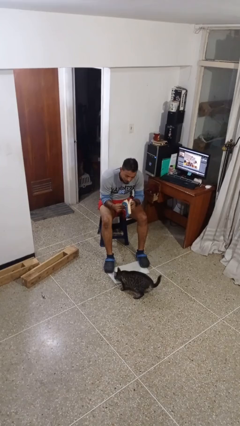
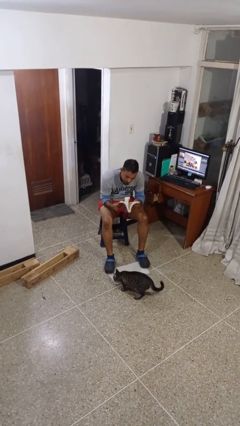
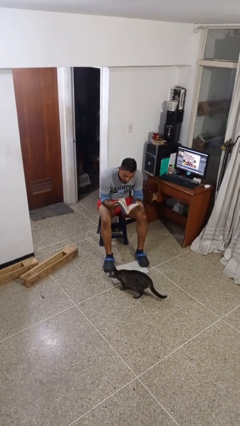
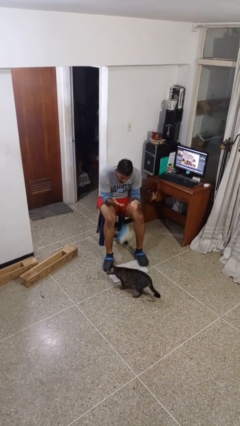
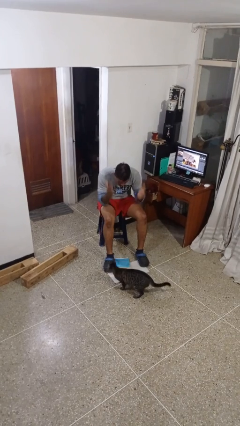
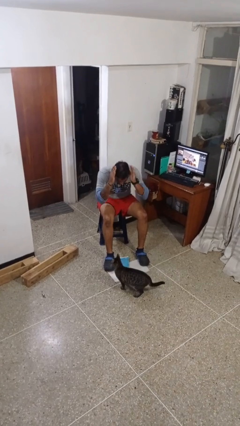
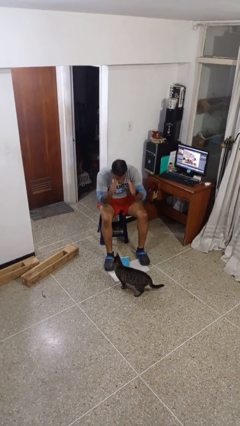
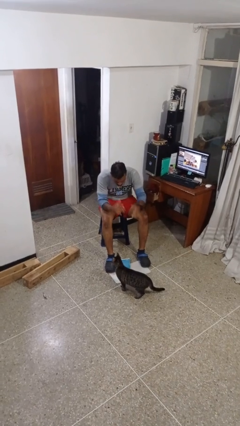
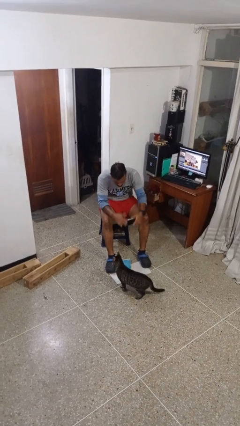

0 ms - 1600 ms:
person drops object

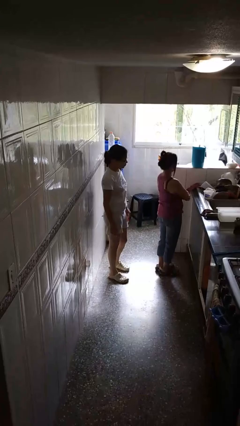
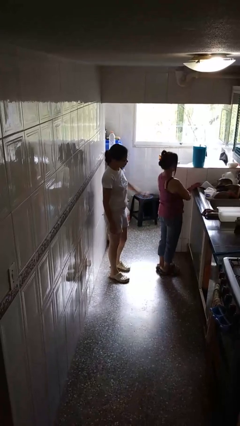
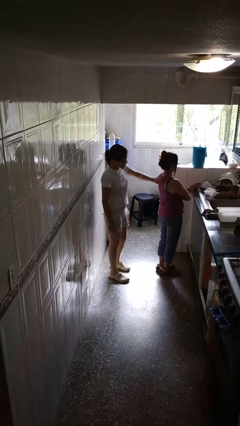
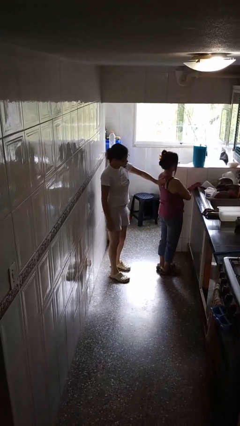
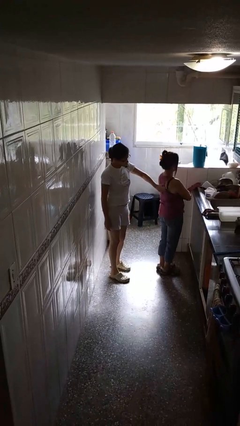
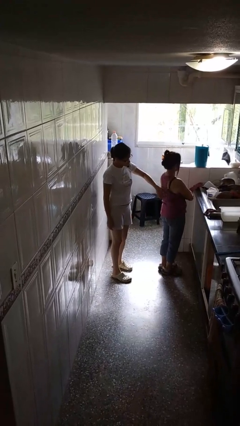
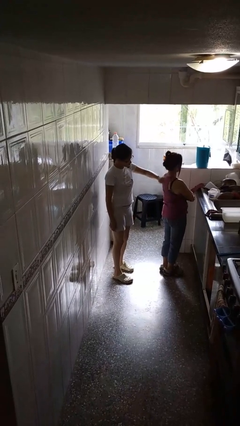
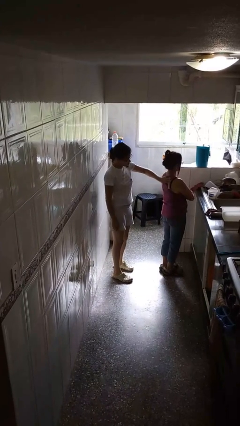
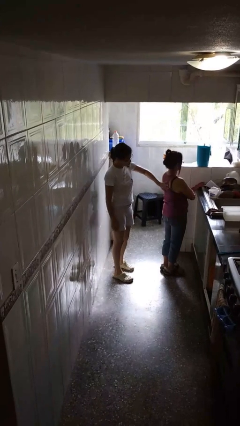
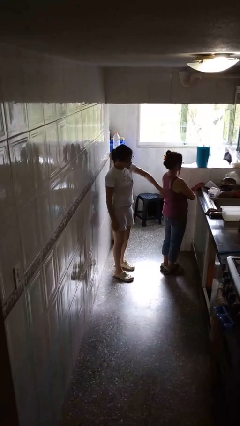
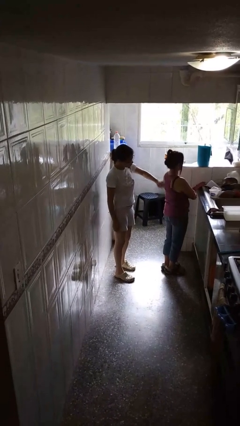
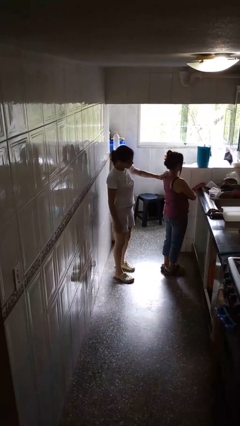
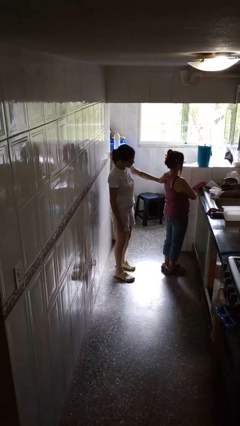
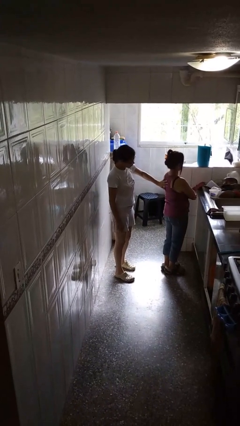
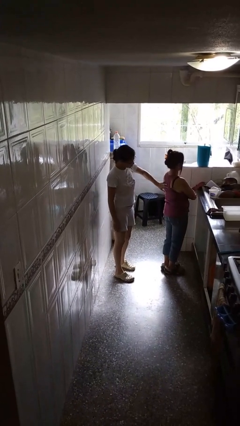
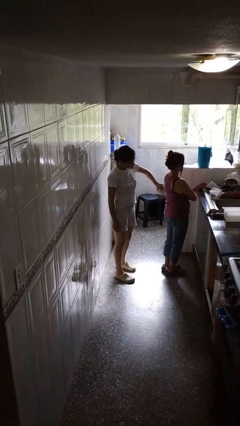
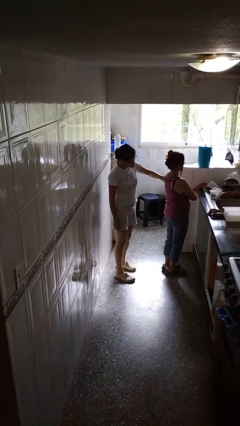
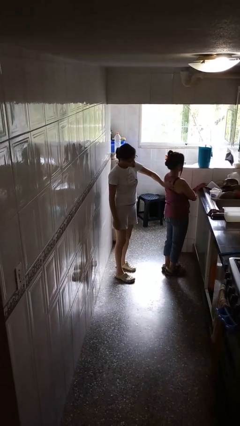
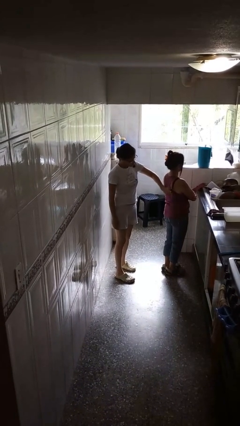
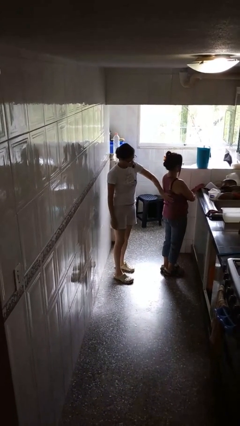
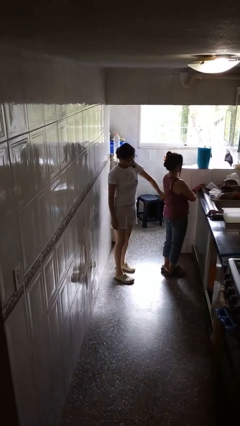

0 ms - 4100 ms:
person touches back of person

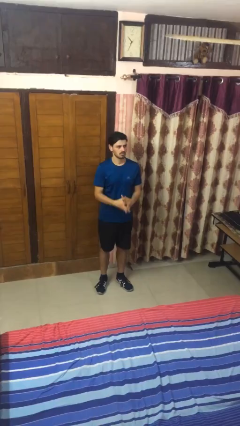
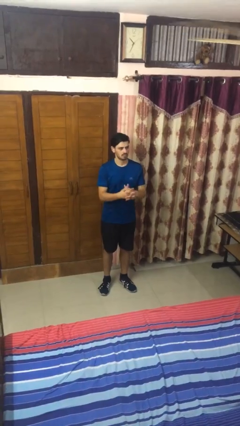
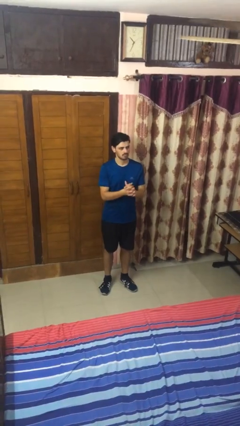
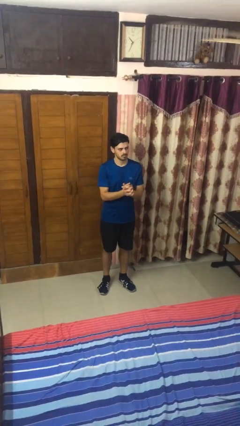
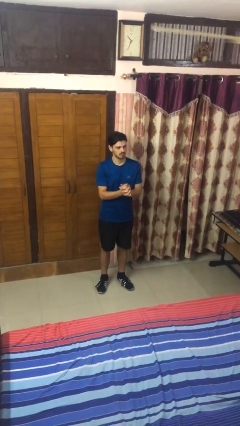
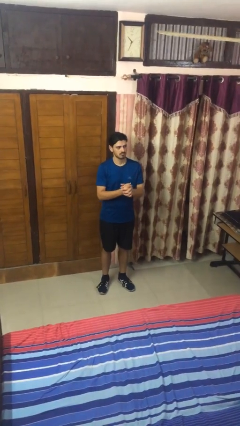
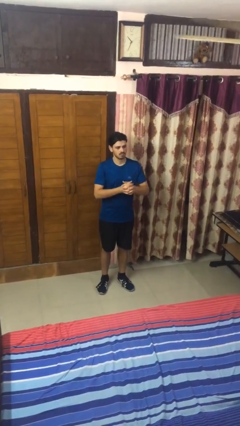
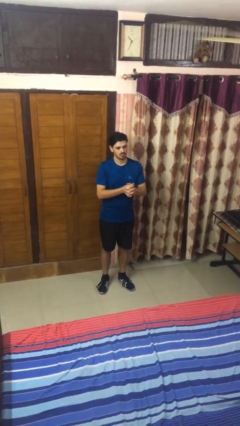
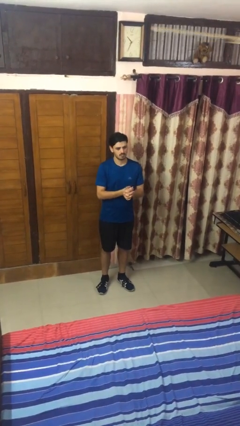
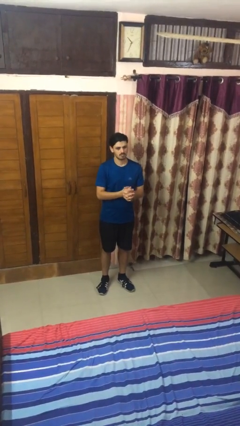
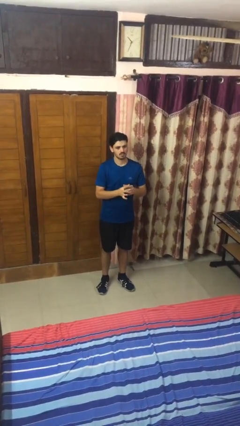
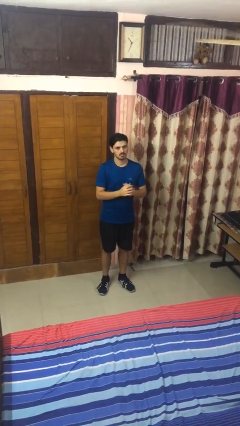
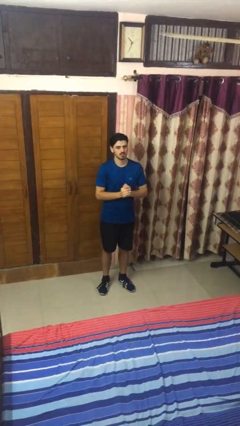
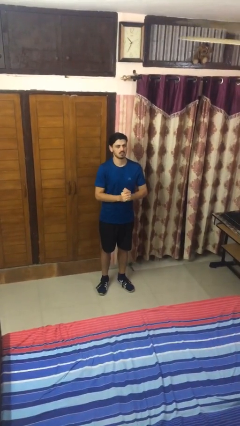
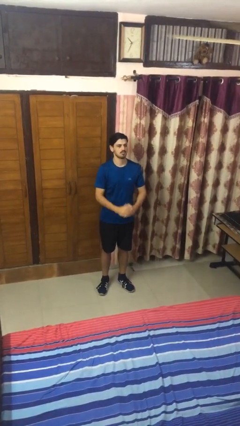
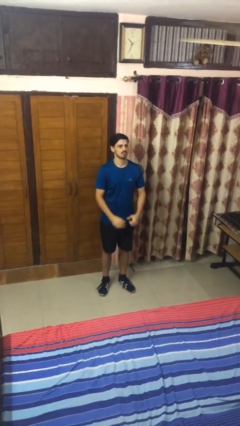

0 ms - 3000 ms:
person cracks knuckles

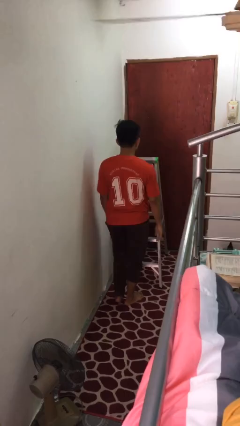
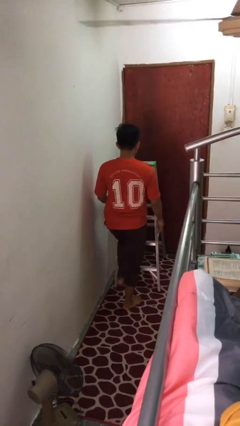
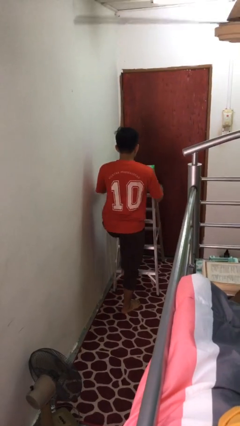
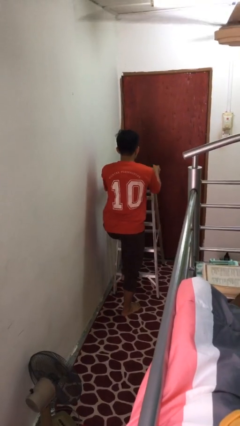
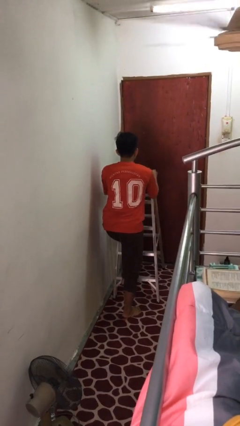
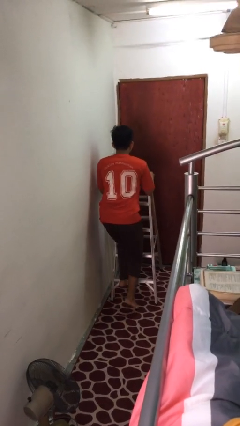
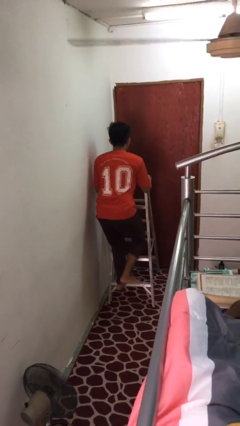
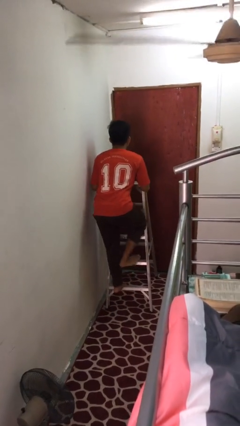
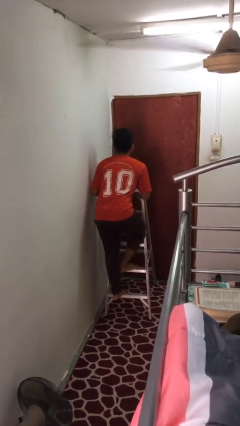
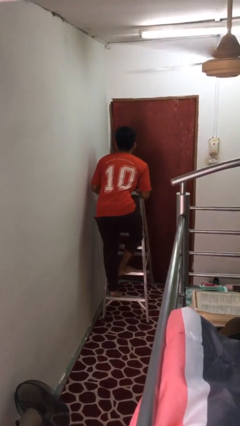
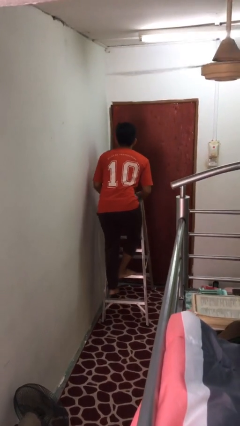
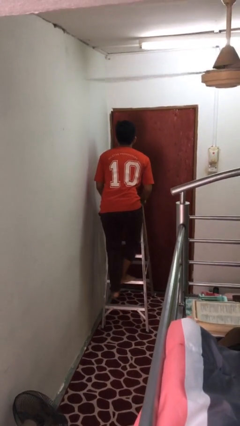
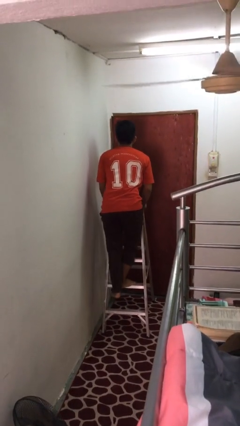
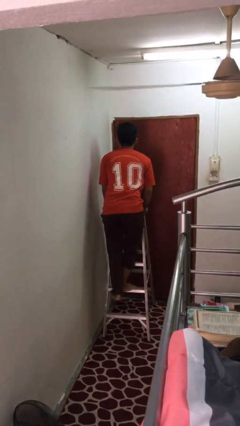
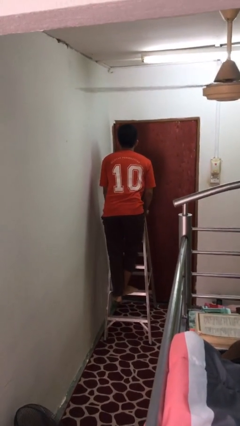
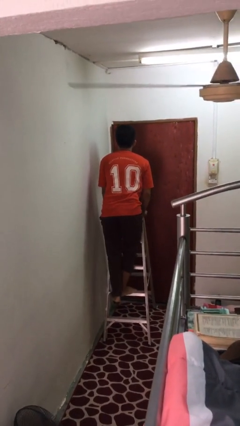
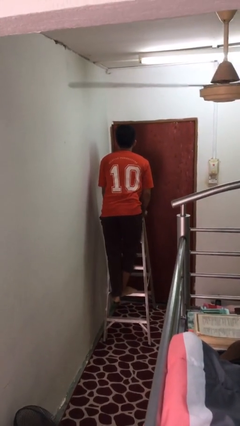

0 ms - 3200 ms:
person climbs up ladder

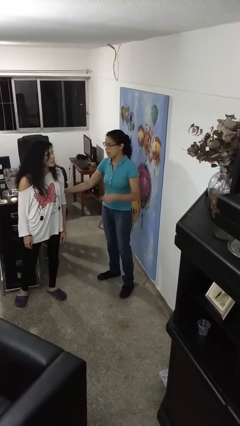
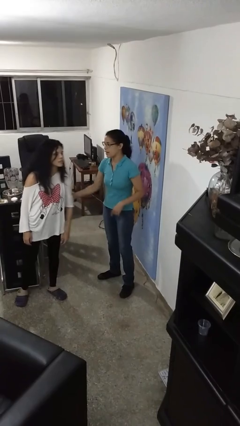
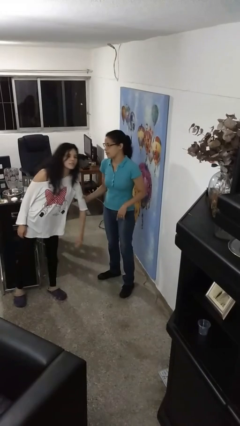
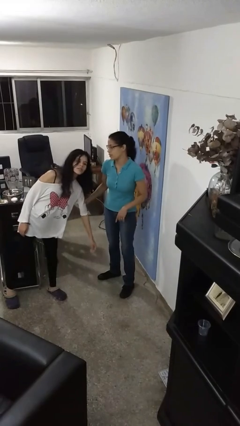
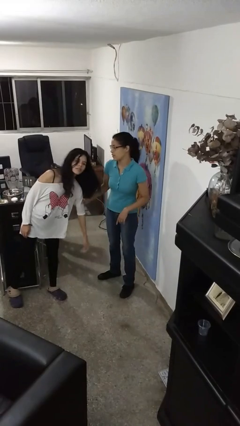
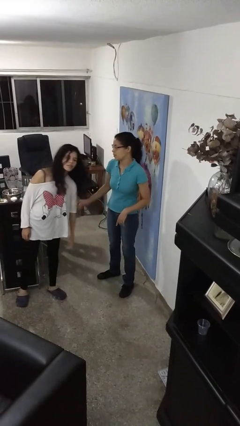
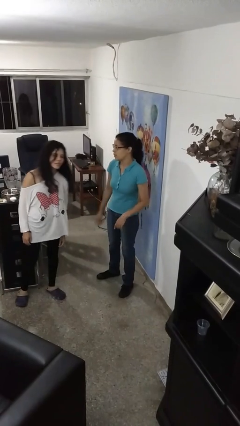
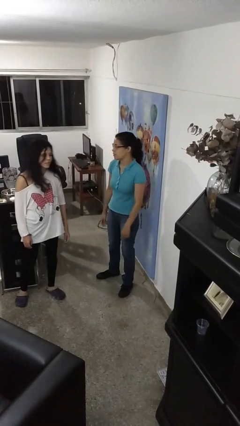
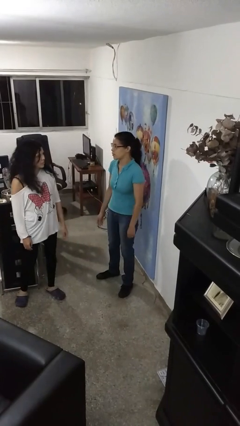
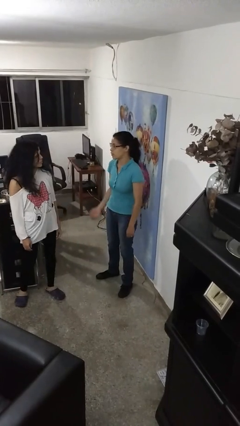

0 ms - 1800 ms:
person grabs person by bicep

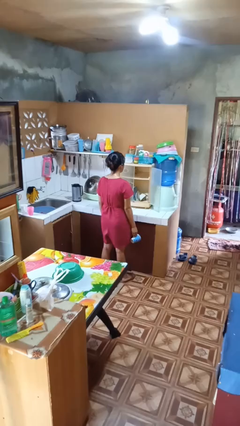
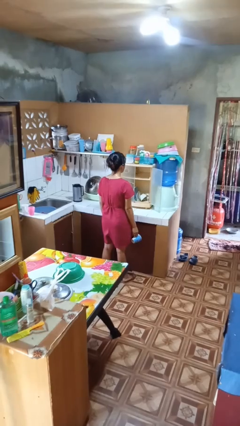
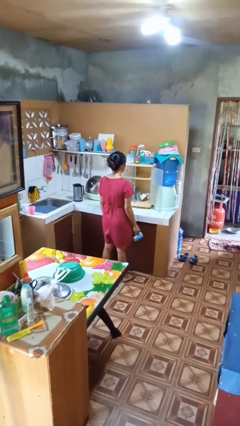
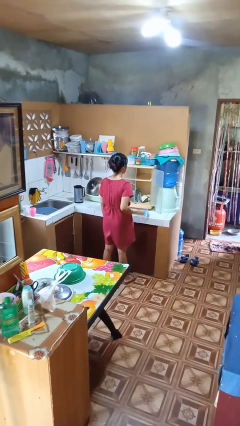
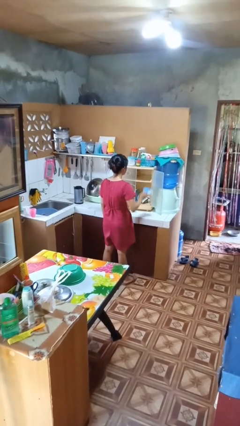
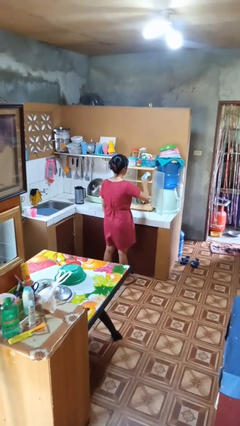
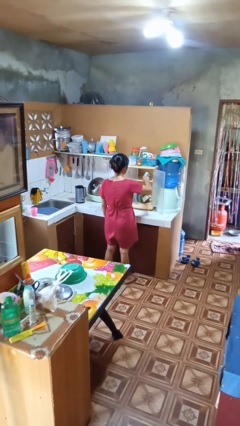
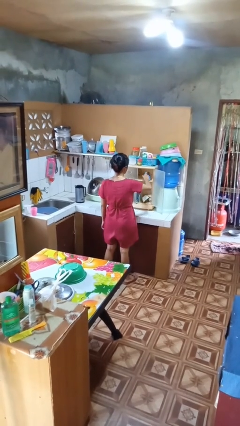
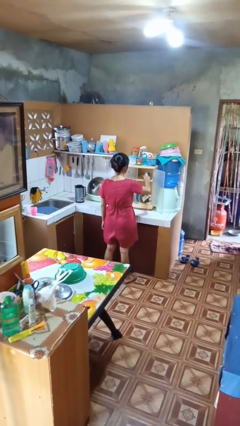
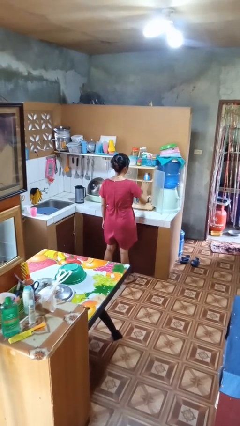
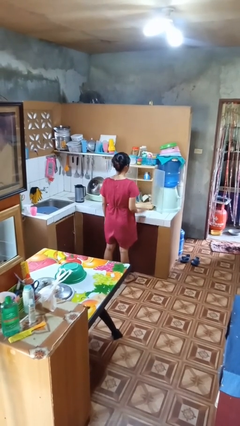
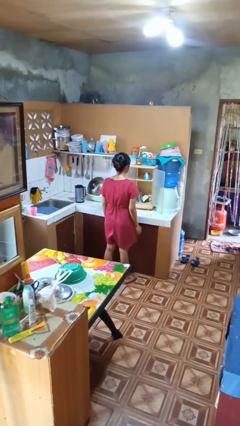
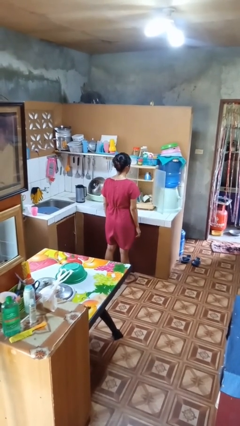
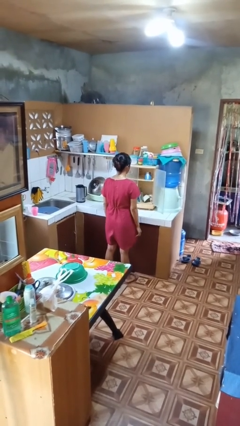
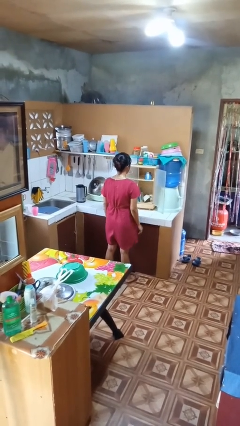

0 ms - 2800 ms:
person puts object in cabinet

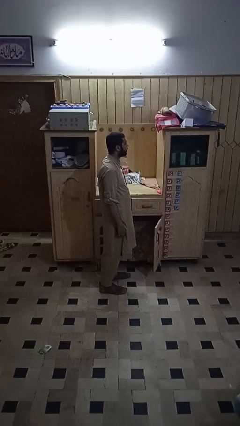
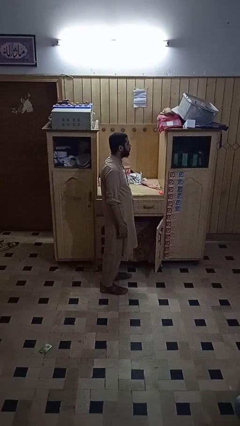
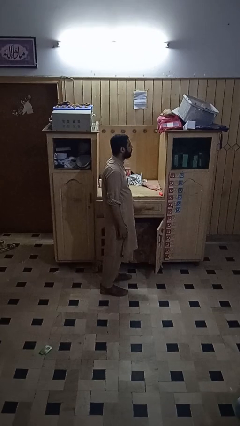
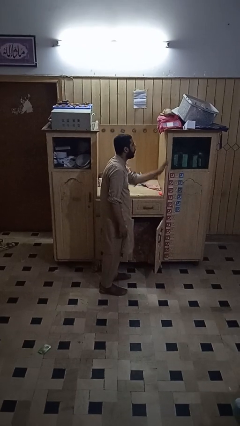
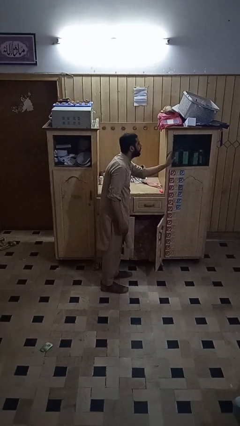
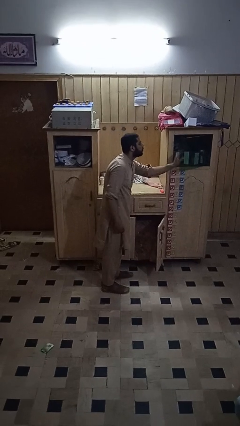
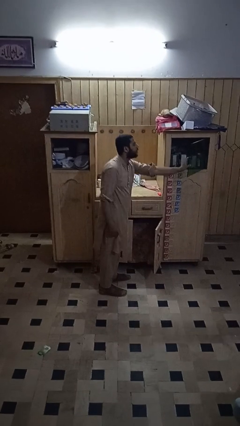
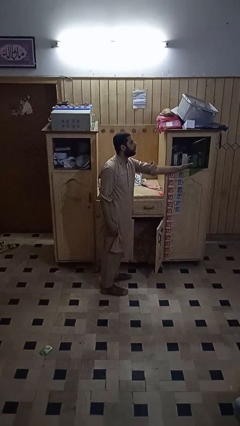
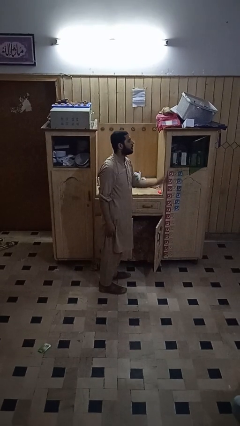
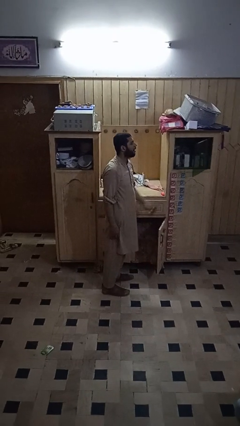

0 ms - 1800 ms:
person closes cabinet
